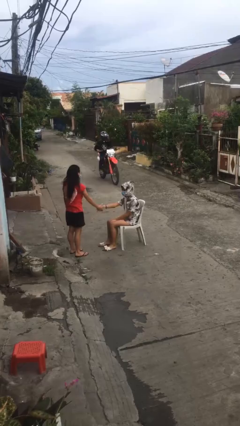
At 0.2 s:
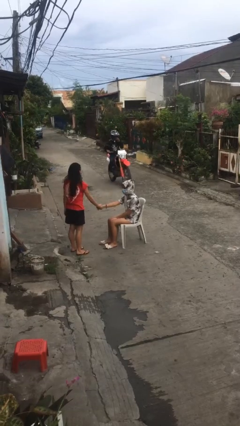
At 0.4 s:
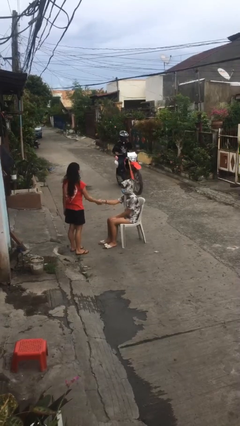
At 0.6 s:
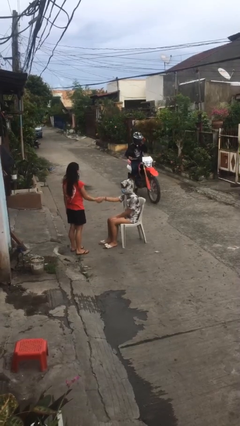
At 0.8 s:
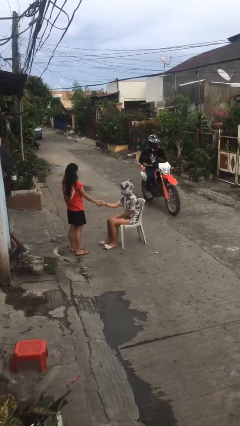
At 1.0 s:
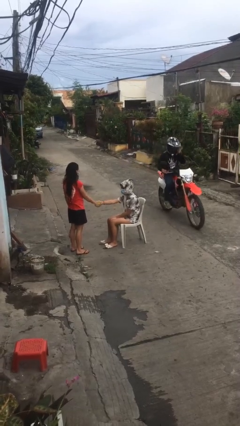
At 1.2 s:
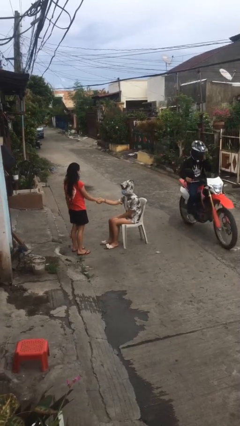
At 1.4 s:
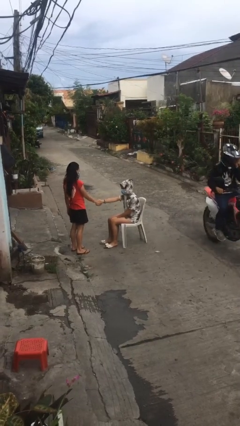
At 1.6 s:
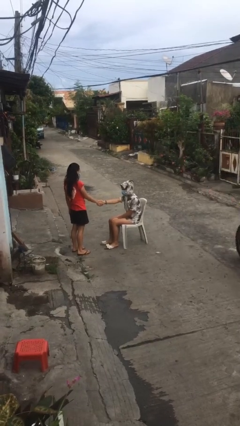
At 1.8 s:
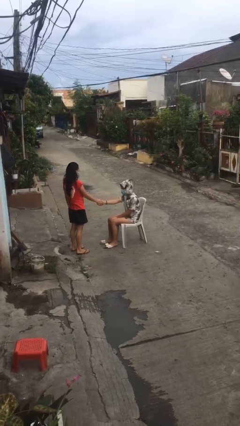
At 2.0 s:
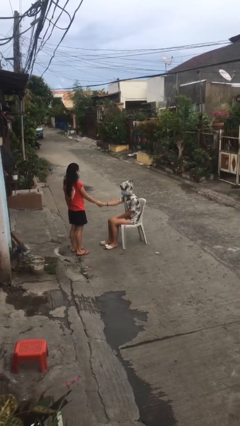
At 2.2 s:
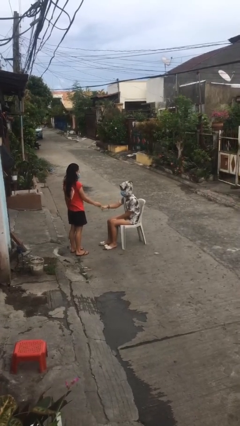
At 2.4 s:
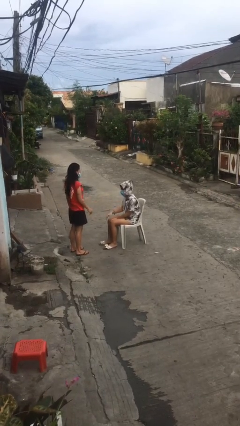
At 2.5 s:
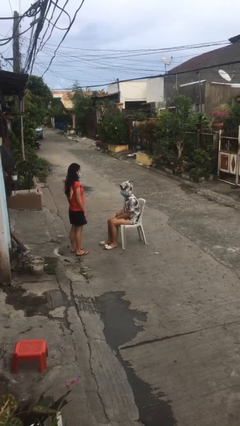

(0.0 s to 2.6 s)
person shakes hand

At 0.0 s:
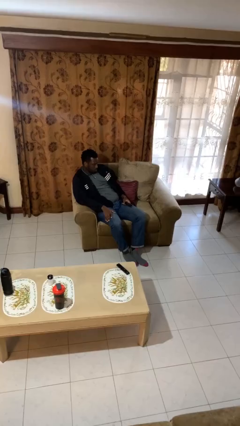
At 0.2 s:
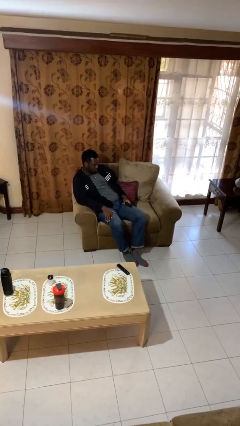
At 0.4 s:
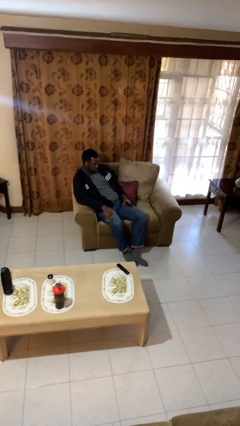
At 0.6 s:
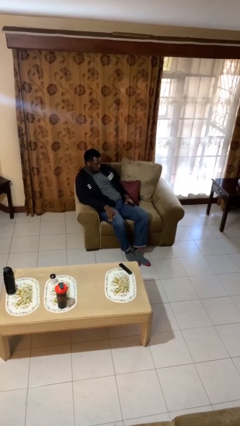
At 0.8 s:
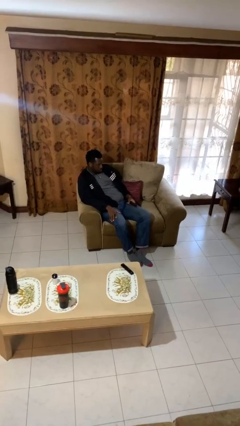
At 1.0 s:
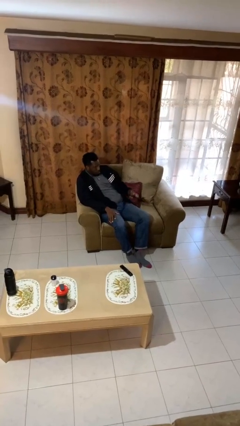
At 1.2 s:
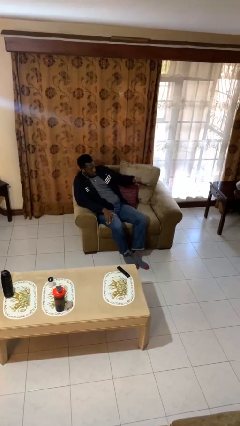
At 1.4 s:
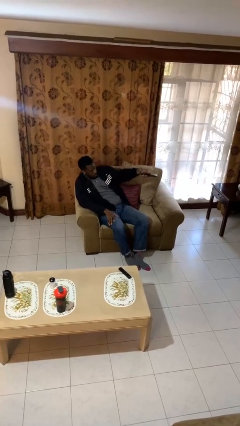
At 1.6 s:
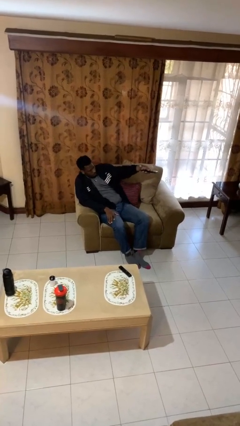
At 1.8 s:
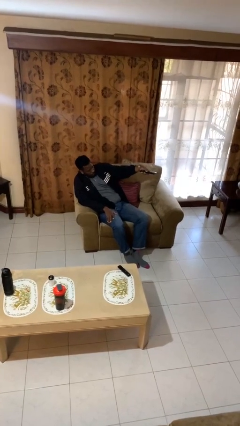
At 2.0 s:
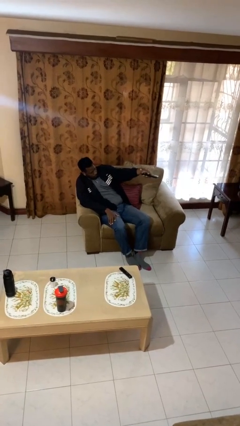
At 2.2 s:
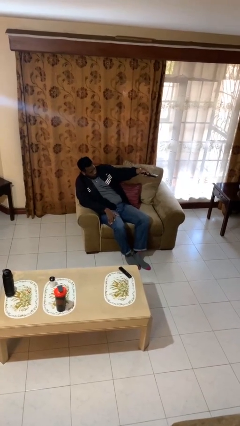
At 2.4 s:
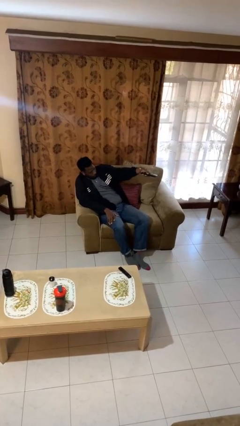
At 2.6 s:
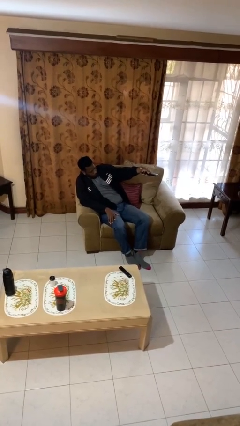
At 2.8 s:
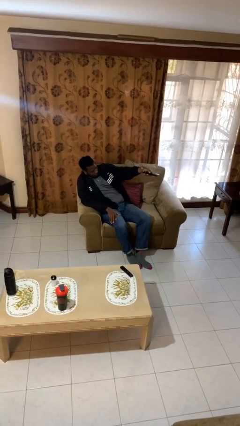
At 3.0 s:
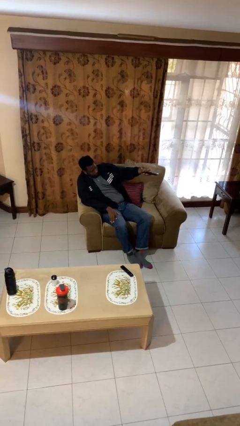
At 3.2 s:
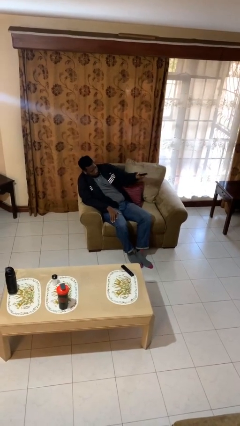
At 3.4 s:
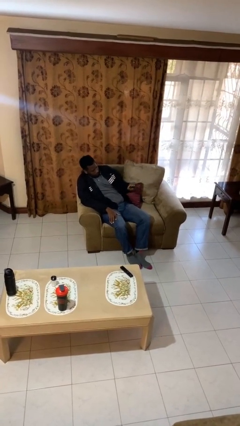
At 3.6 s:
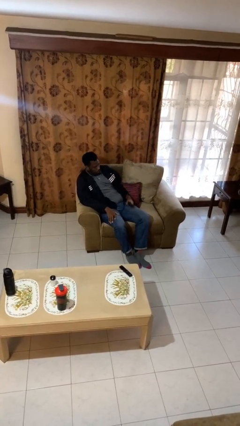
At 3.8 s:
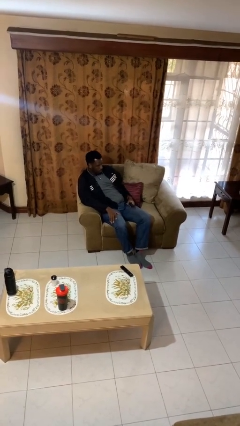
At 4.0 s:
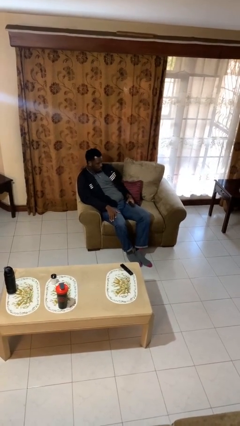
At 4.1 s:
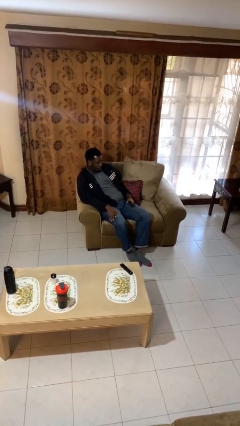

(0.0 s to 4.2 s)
person uses television remote

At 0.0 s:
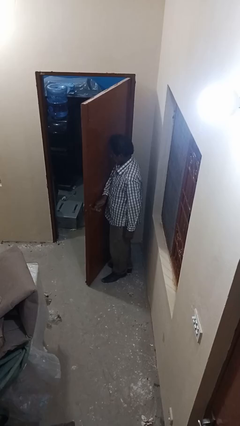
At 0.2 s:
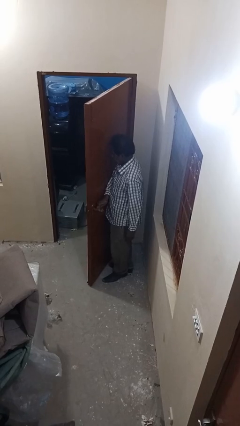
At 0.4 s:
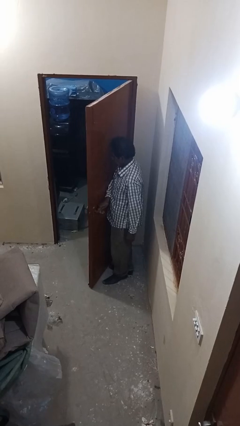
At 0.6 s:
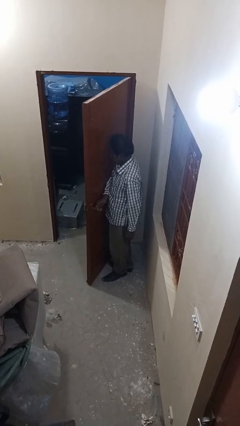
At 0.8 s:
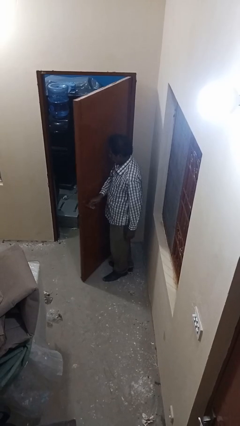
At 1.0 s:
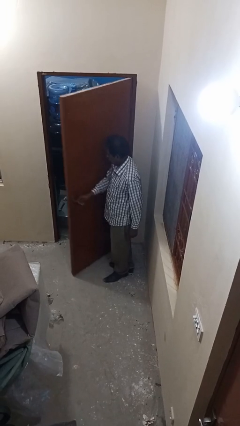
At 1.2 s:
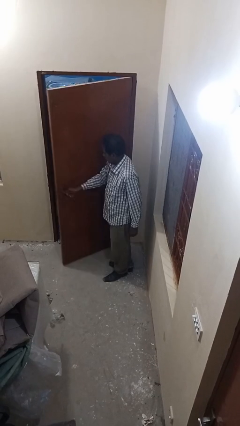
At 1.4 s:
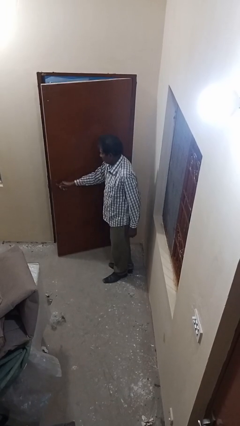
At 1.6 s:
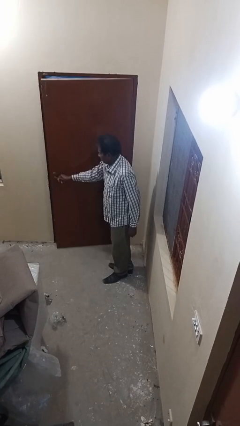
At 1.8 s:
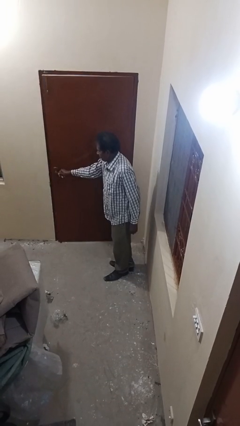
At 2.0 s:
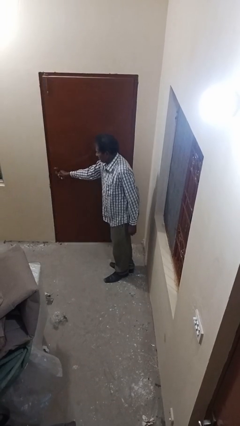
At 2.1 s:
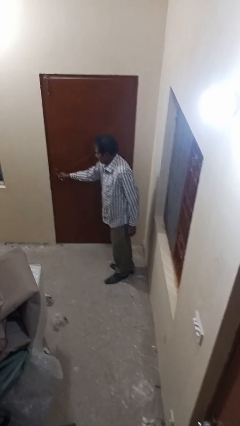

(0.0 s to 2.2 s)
person closes facility door

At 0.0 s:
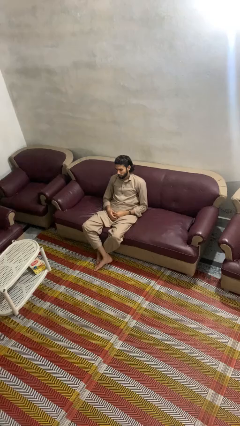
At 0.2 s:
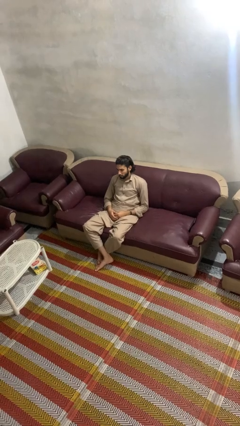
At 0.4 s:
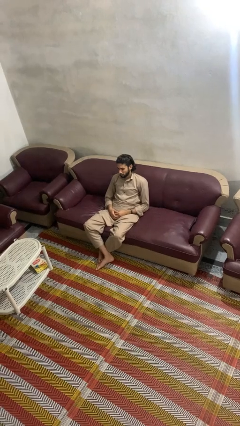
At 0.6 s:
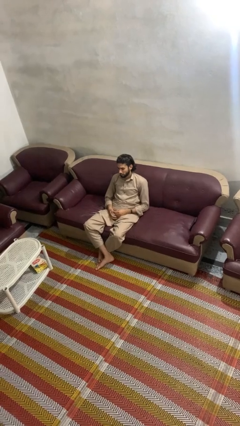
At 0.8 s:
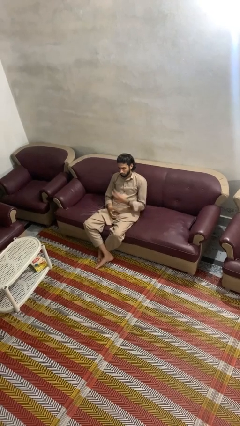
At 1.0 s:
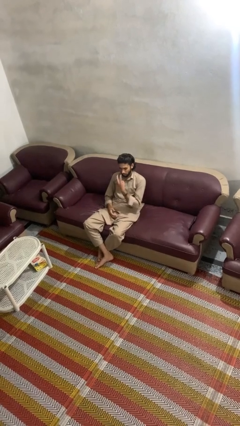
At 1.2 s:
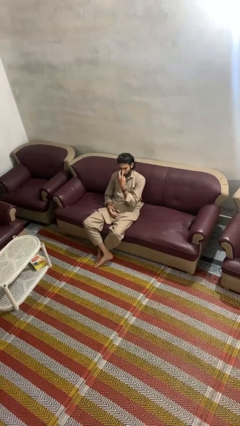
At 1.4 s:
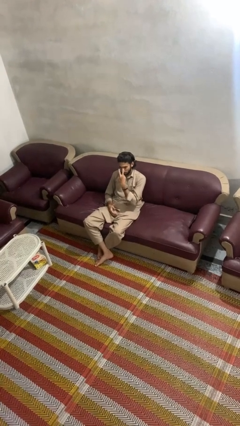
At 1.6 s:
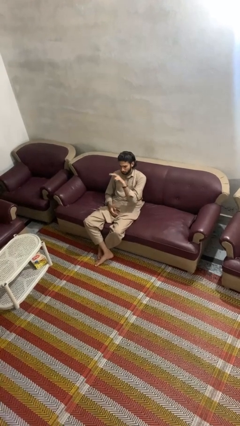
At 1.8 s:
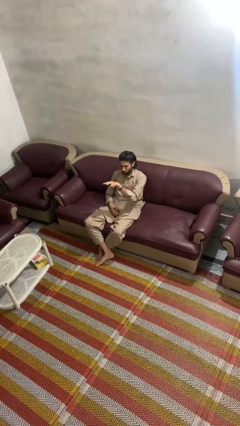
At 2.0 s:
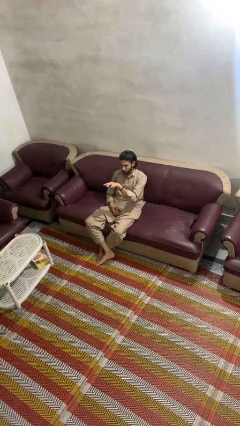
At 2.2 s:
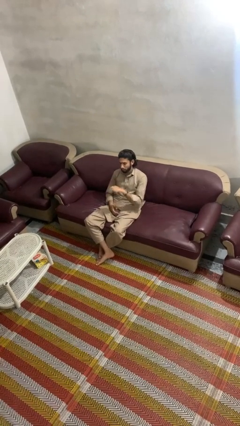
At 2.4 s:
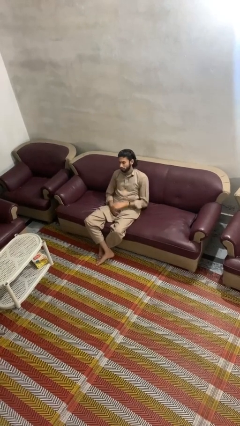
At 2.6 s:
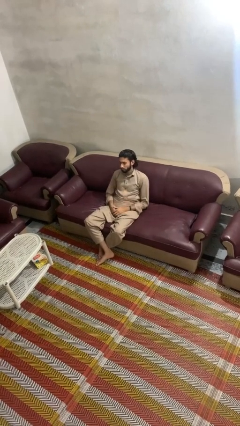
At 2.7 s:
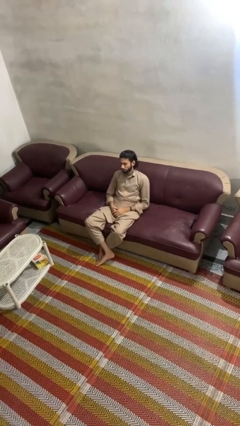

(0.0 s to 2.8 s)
person gestures watch closely

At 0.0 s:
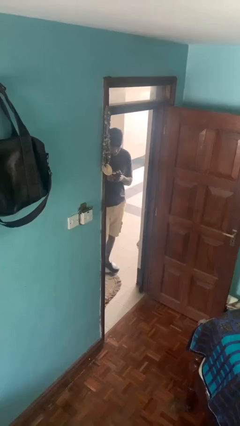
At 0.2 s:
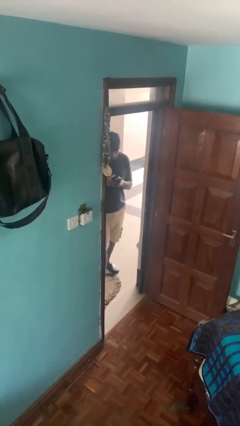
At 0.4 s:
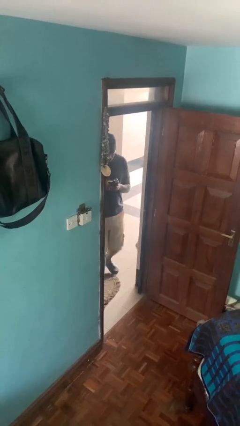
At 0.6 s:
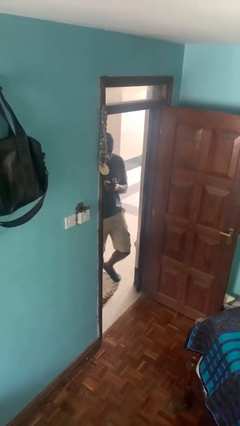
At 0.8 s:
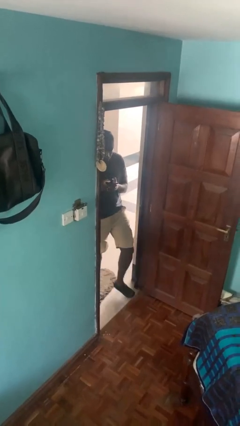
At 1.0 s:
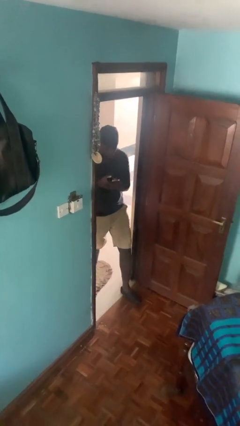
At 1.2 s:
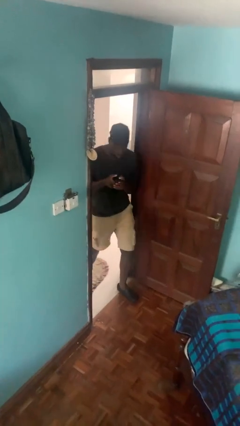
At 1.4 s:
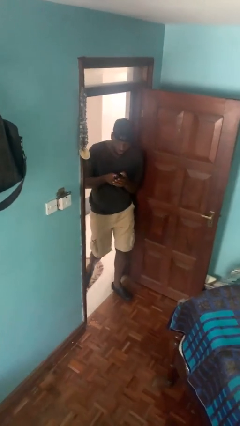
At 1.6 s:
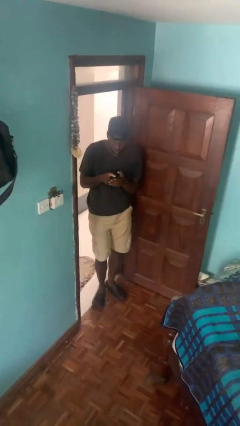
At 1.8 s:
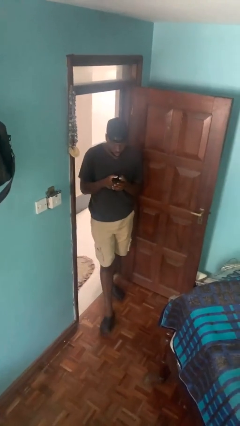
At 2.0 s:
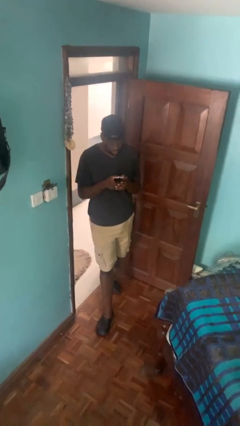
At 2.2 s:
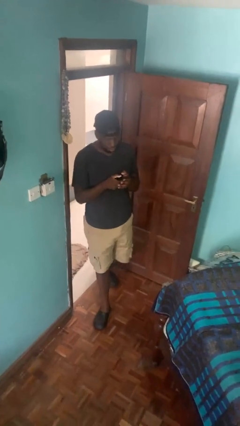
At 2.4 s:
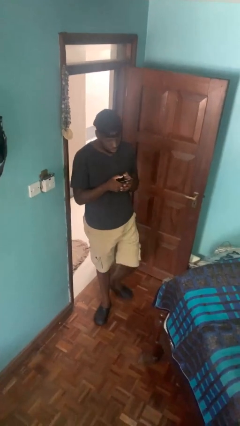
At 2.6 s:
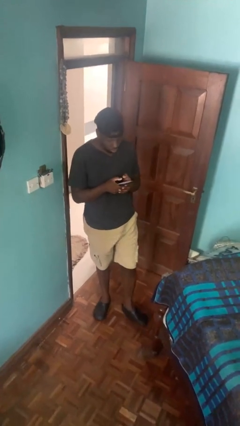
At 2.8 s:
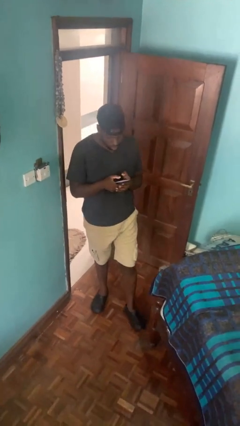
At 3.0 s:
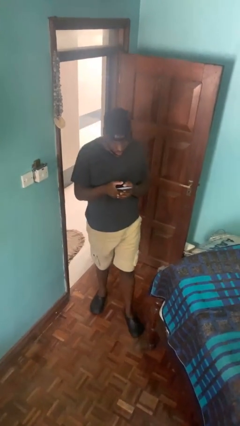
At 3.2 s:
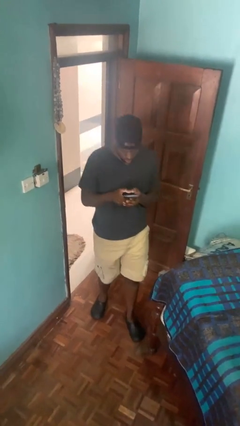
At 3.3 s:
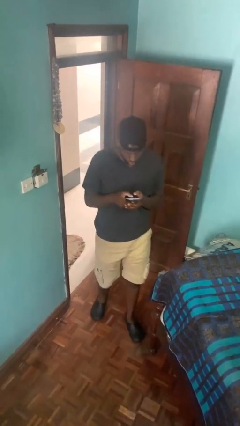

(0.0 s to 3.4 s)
person enters scene through structure

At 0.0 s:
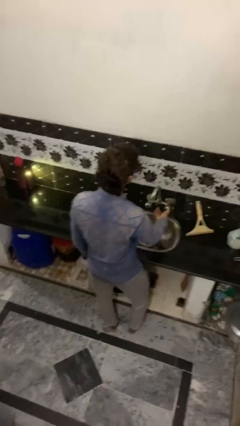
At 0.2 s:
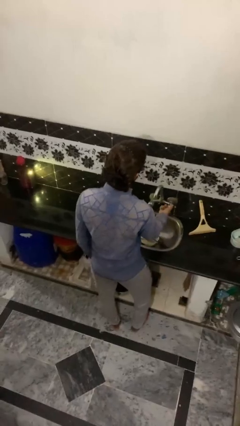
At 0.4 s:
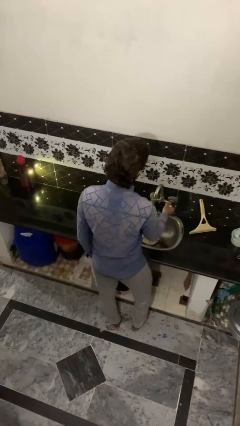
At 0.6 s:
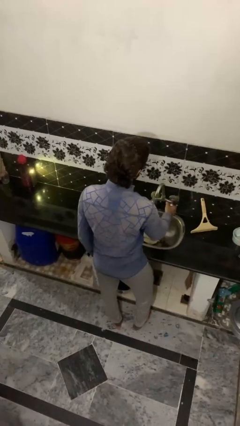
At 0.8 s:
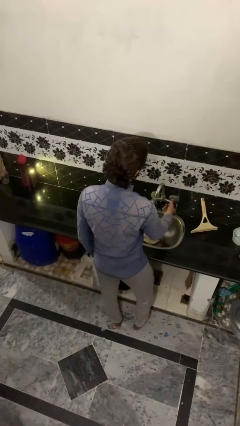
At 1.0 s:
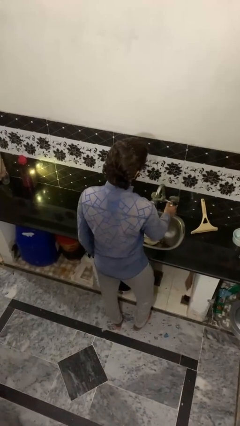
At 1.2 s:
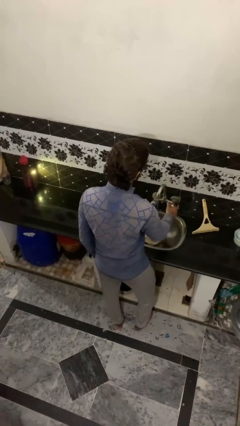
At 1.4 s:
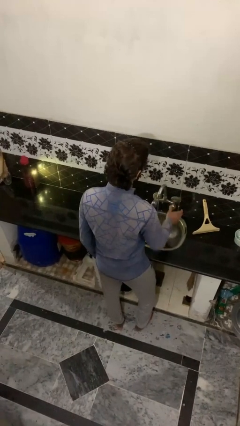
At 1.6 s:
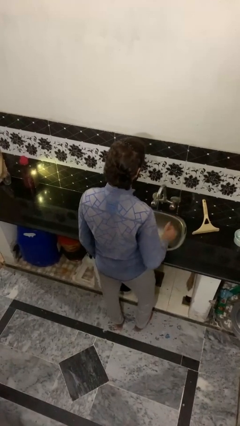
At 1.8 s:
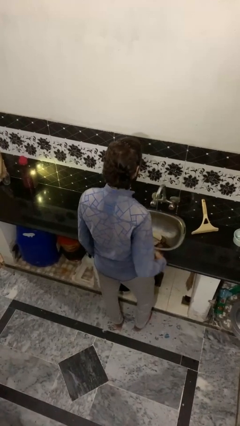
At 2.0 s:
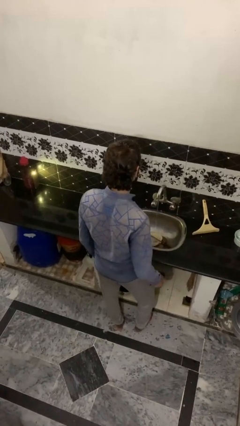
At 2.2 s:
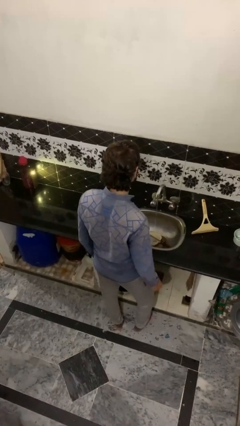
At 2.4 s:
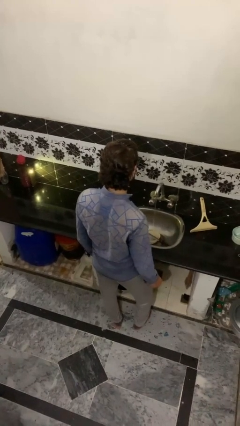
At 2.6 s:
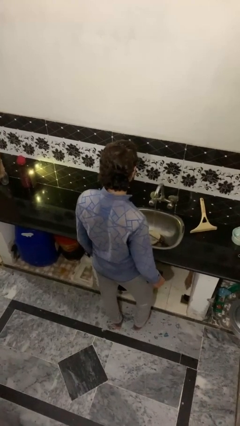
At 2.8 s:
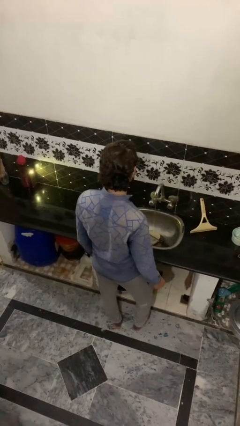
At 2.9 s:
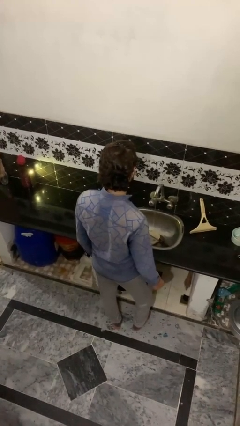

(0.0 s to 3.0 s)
person turns on faucet
